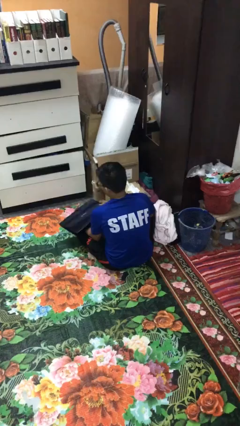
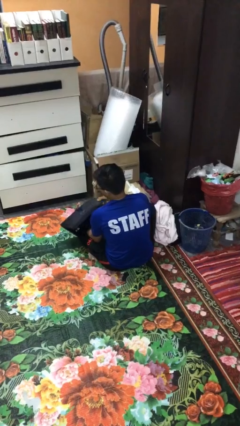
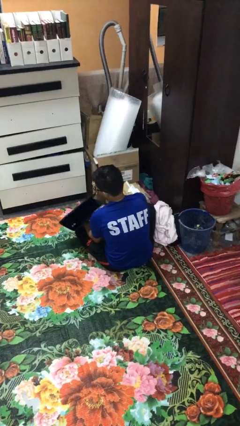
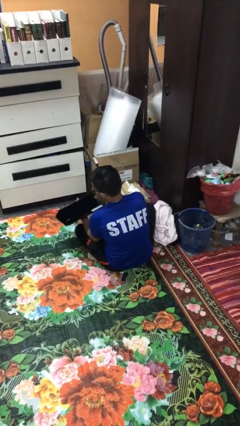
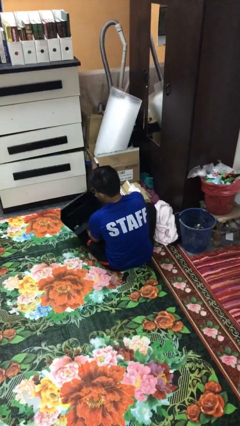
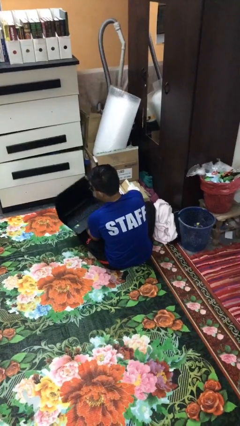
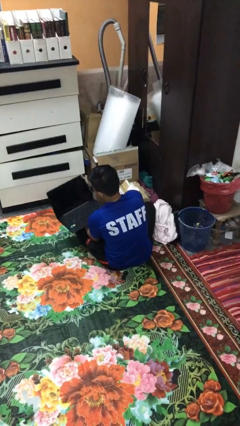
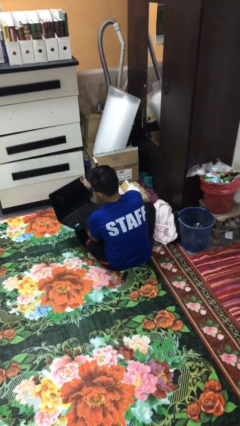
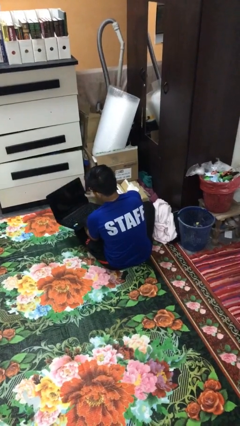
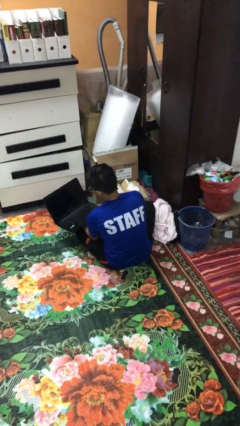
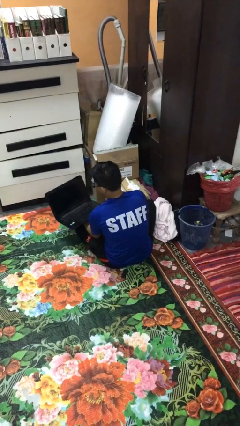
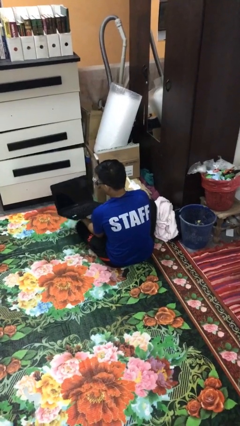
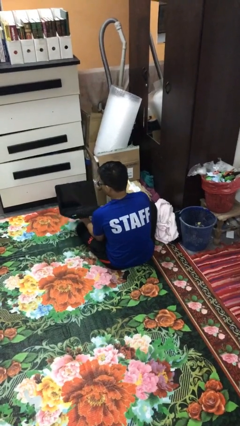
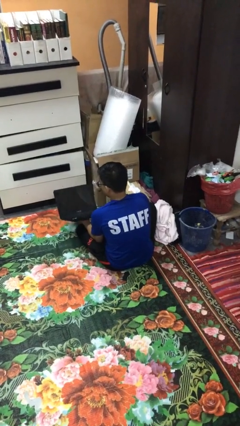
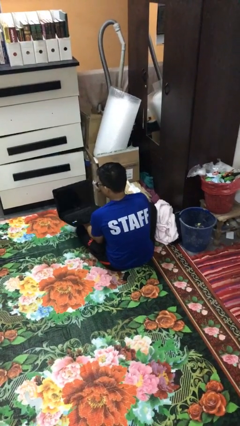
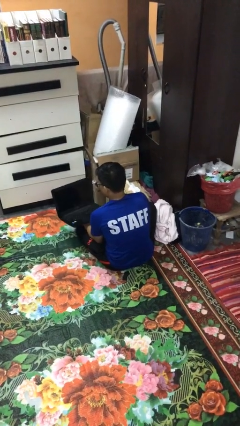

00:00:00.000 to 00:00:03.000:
person opens laptop

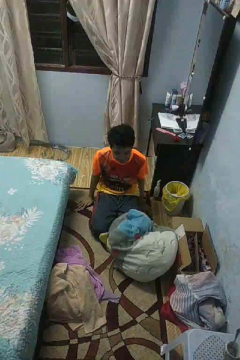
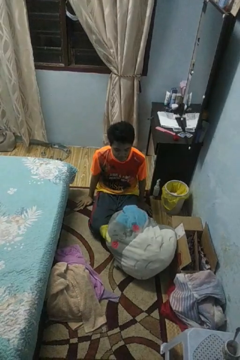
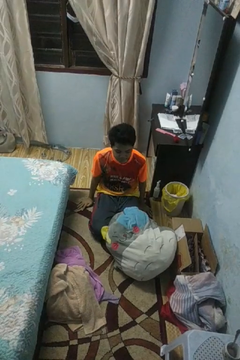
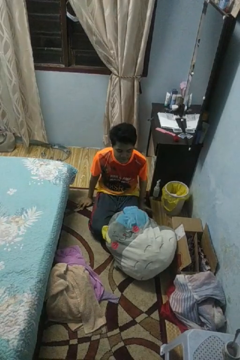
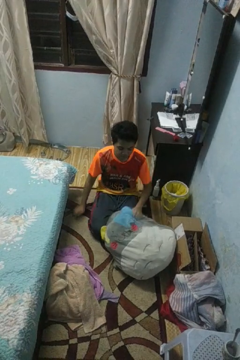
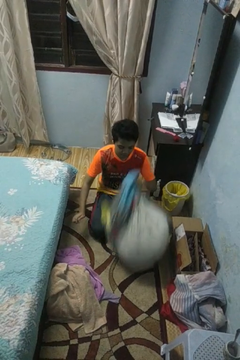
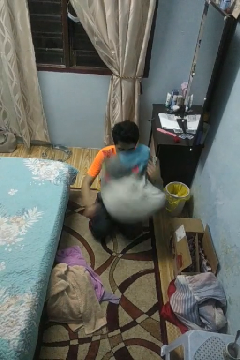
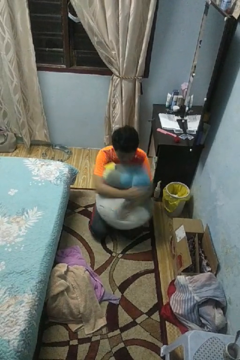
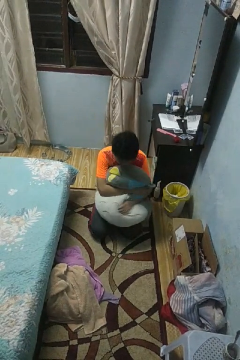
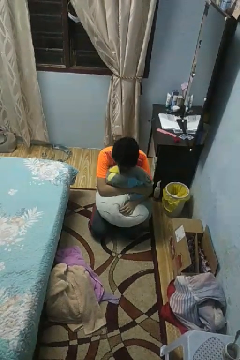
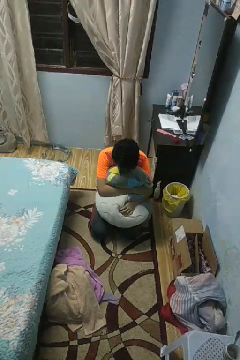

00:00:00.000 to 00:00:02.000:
person hugs stuffed animal

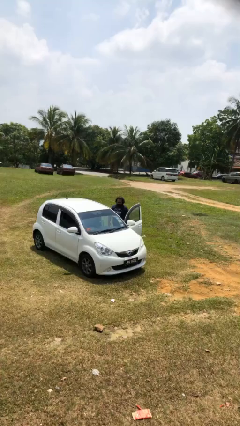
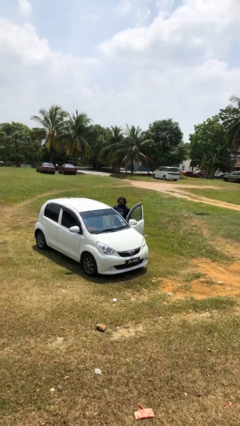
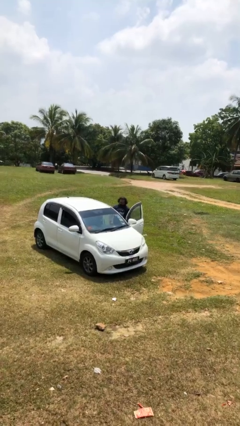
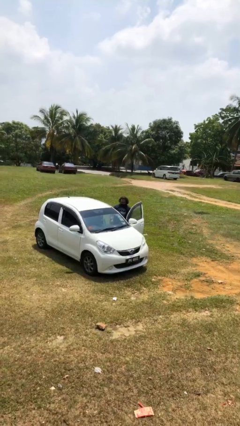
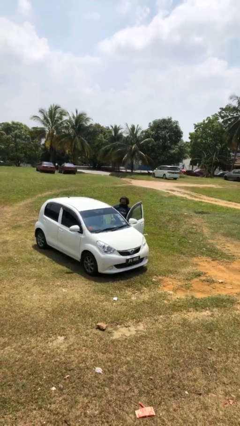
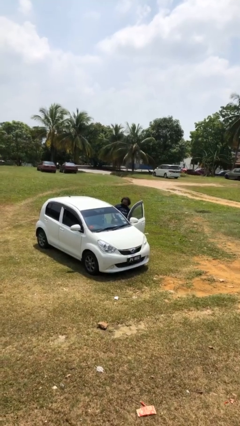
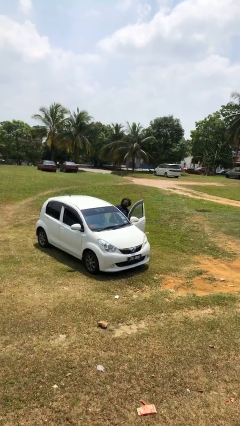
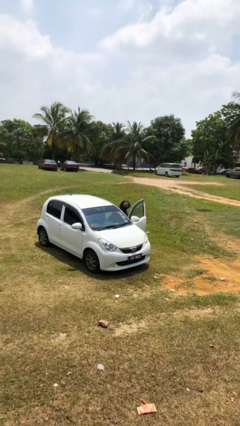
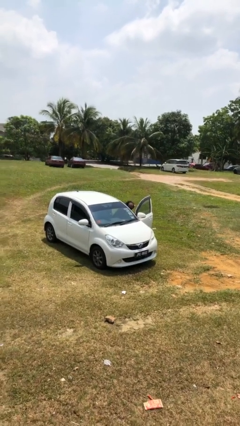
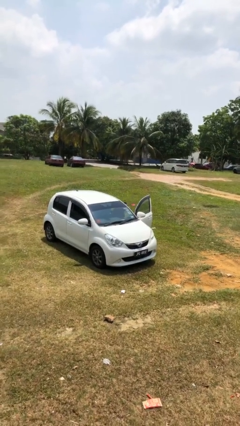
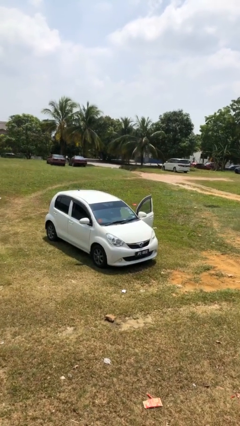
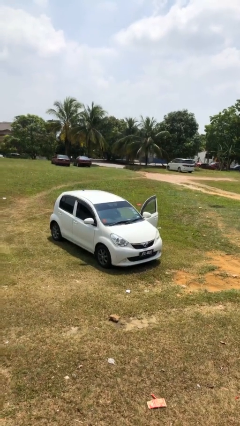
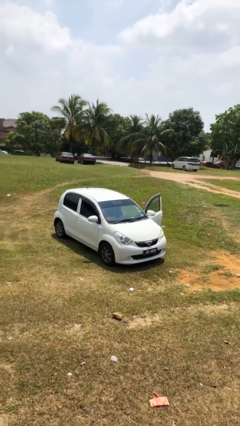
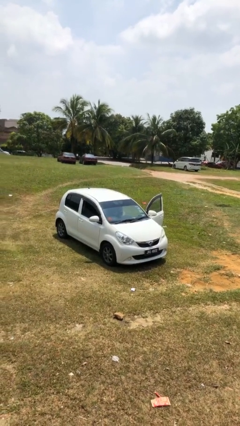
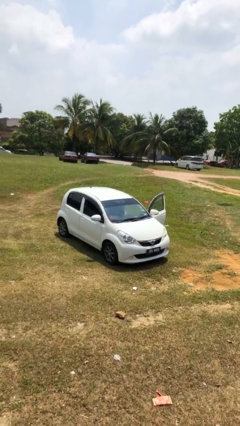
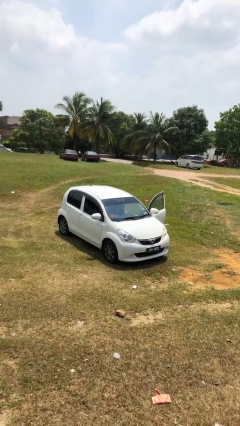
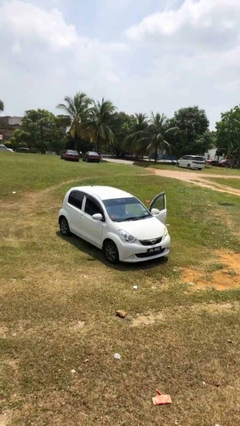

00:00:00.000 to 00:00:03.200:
person enters car

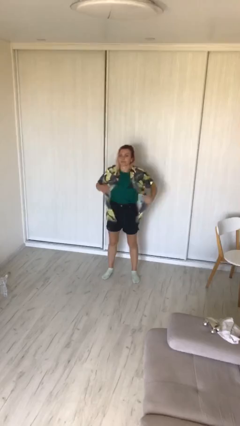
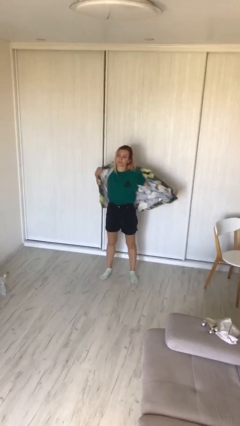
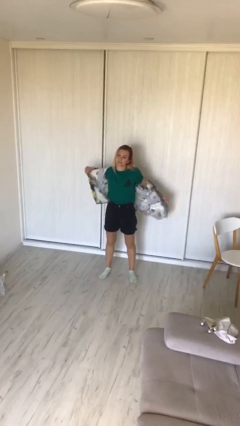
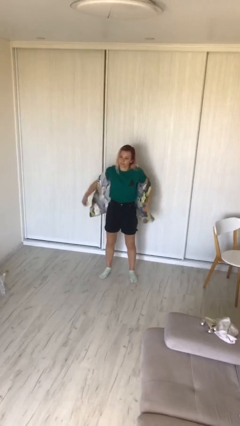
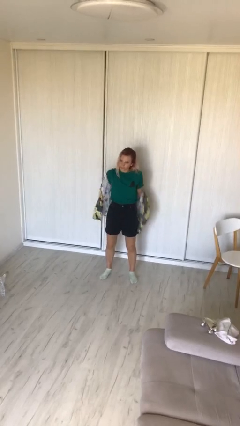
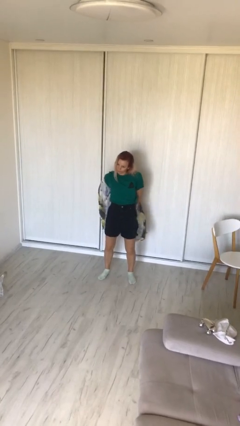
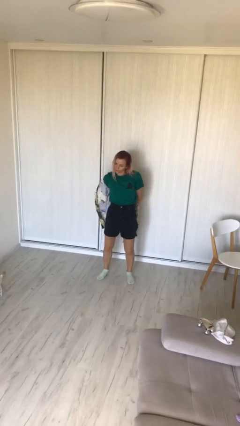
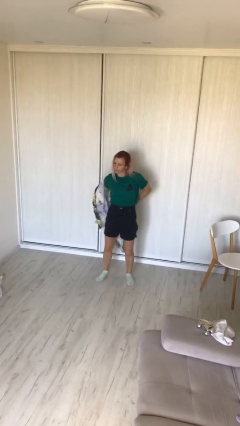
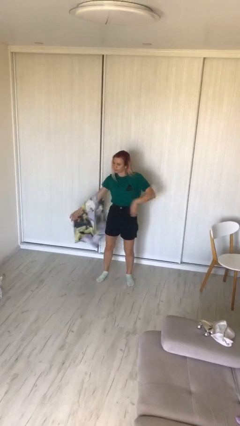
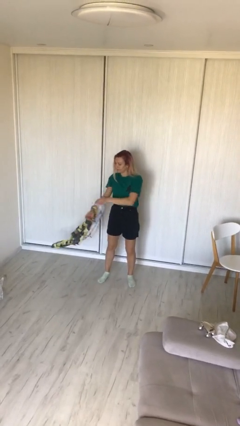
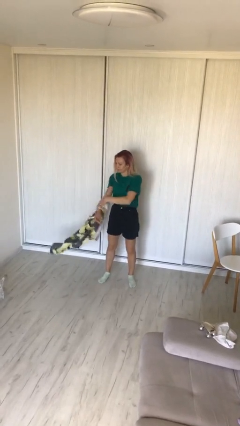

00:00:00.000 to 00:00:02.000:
person takes off shirt

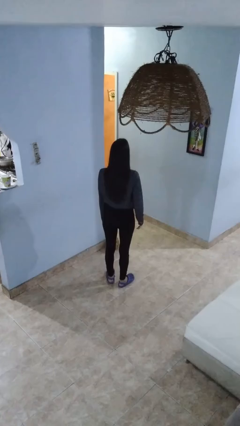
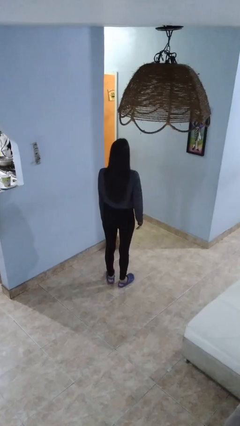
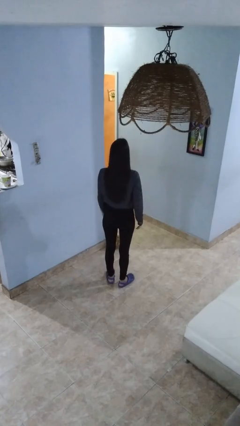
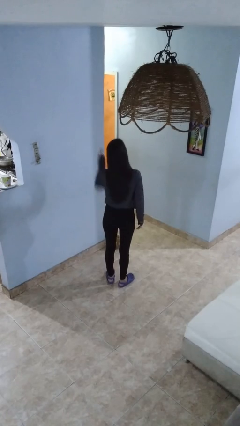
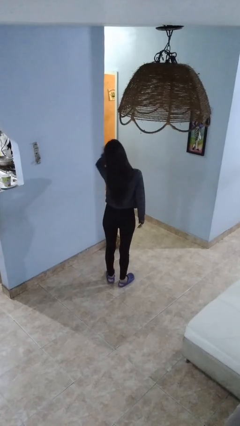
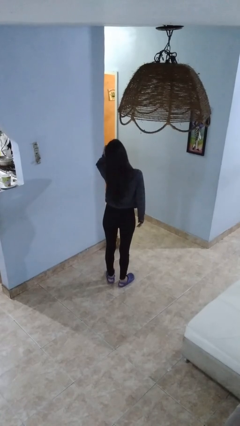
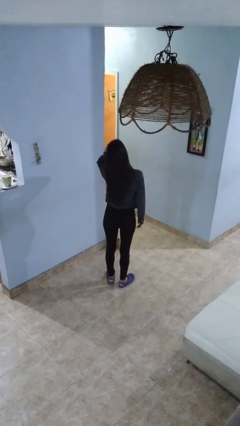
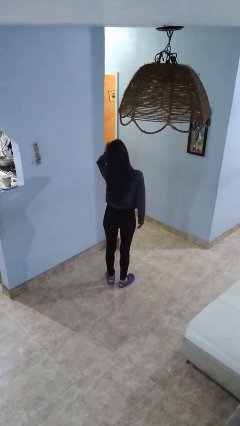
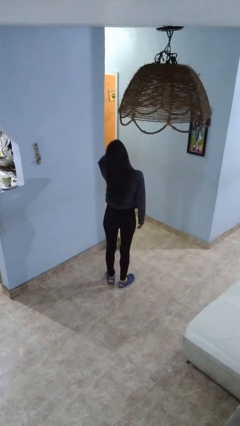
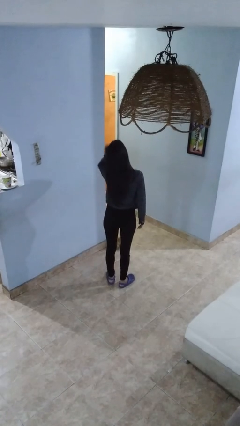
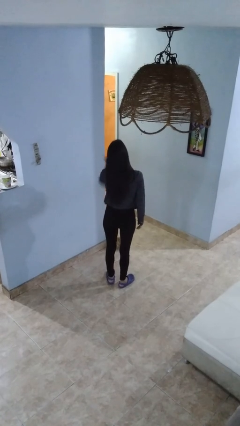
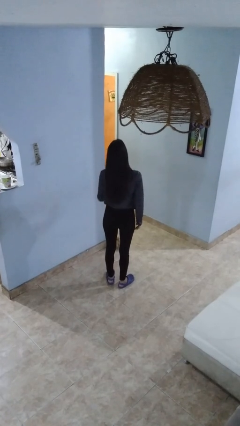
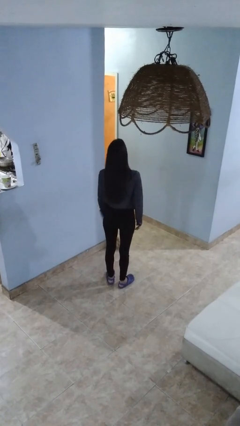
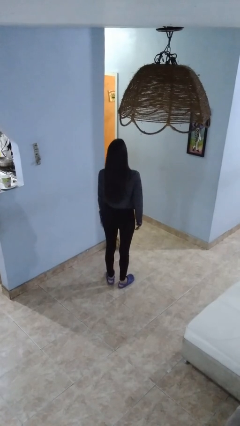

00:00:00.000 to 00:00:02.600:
person pats head

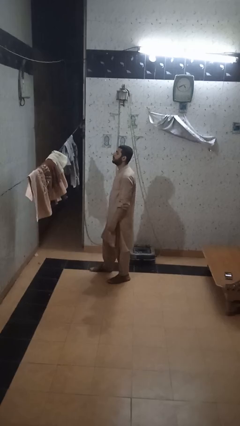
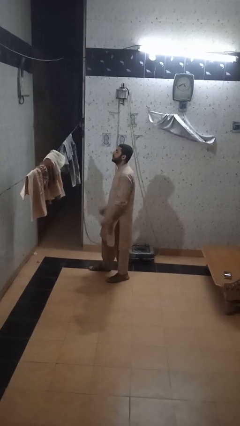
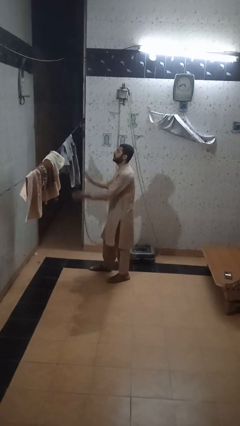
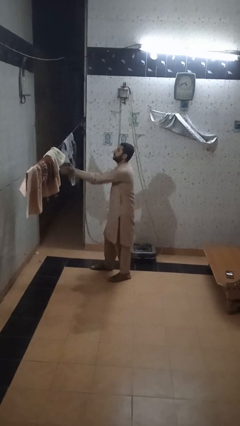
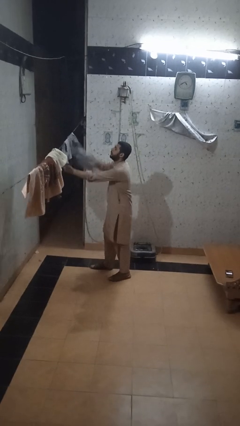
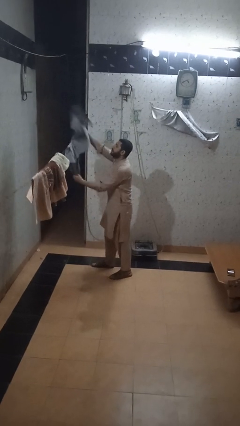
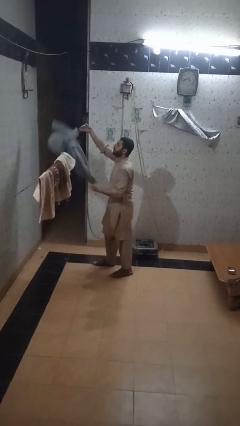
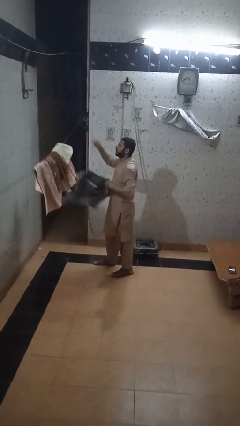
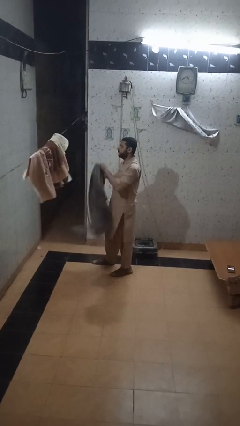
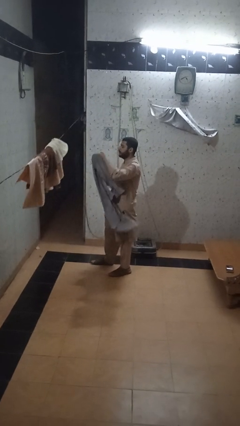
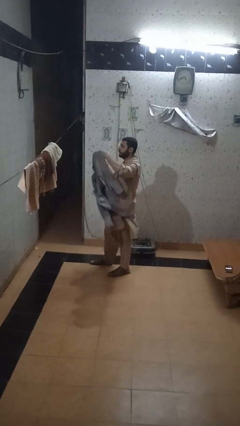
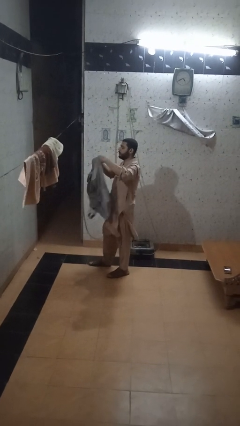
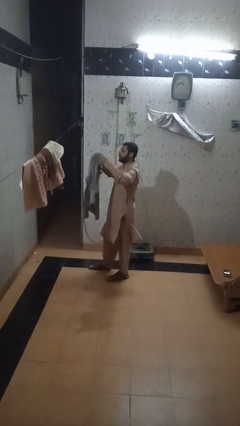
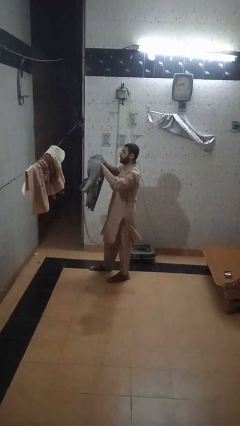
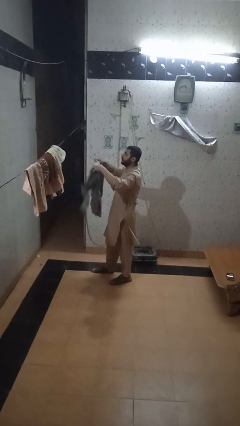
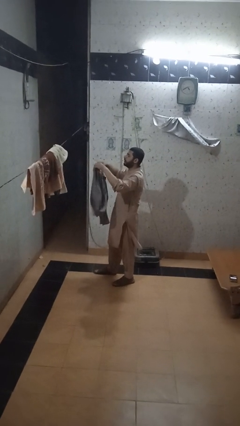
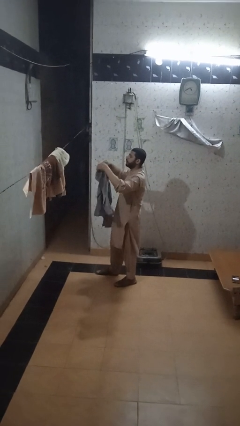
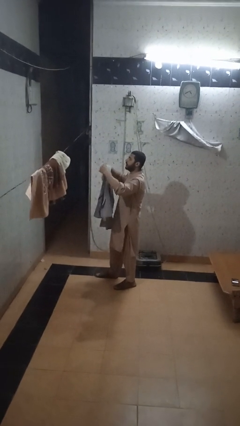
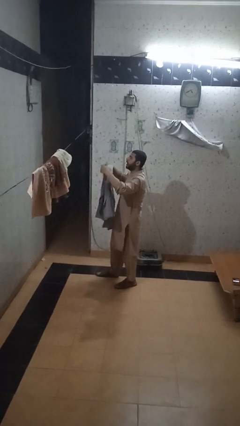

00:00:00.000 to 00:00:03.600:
person takes clothes from closet

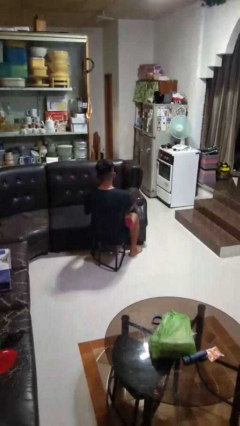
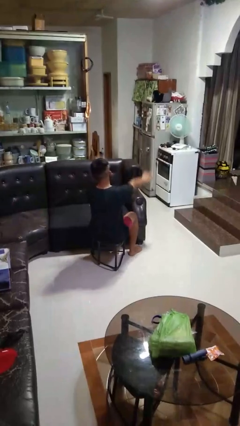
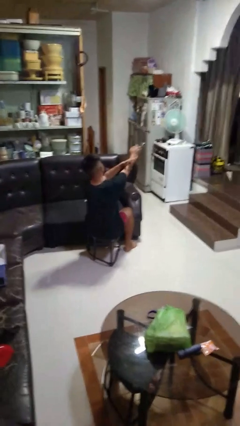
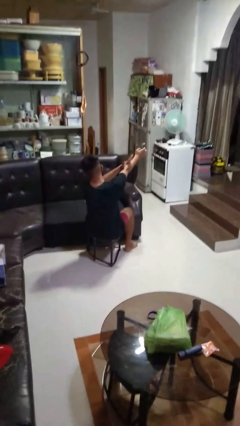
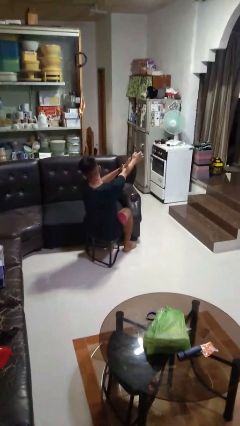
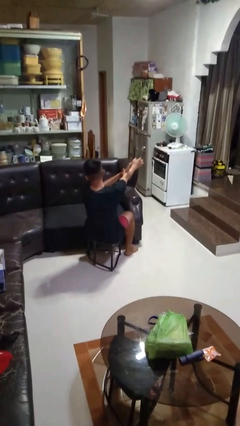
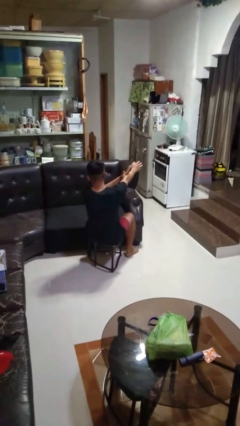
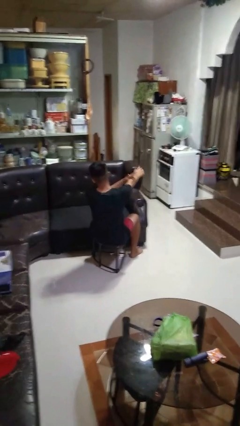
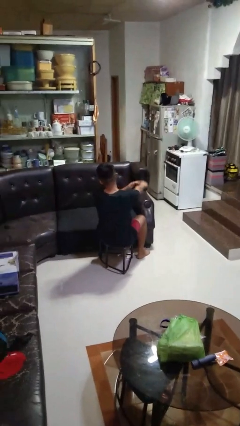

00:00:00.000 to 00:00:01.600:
person swats bug
